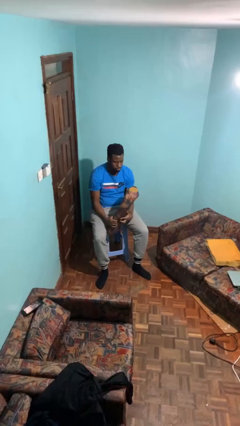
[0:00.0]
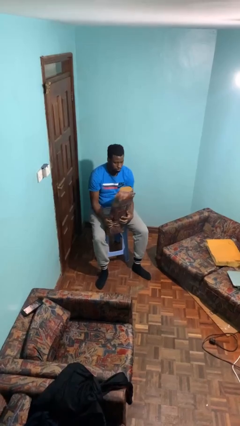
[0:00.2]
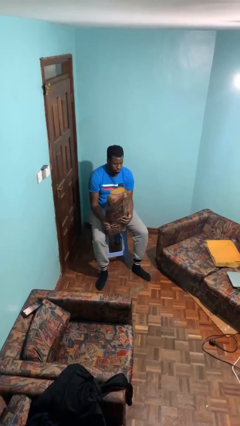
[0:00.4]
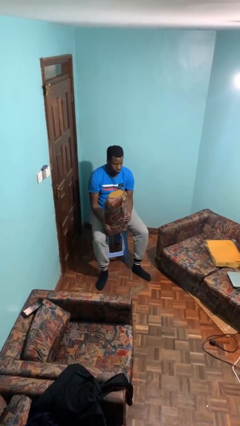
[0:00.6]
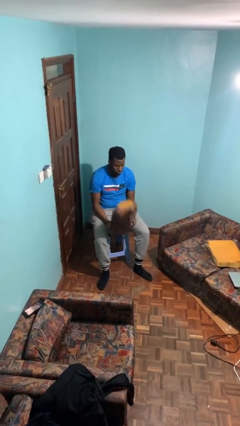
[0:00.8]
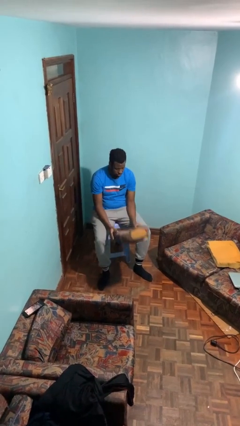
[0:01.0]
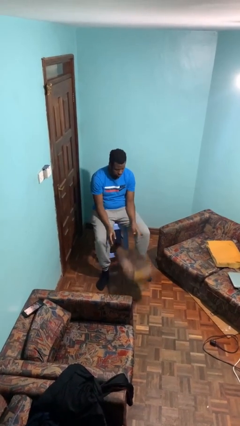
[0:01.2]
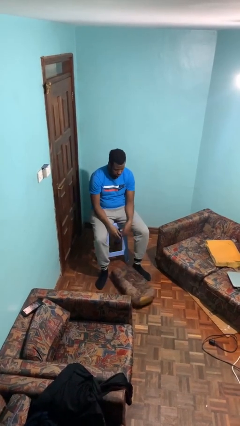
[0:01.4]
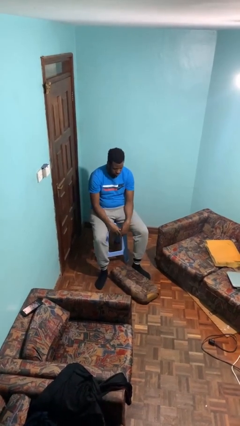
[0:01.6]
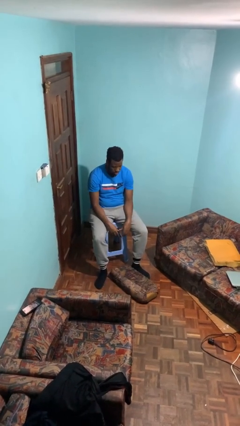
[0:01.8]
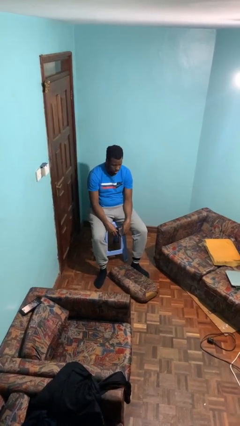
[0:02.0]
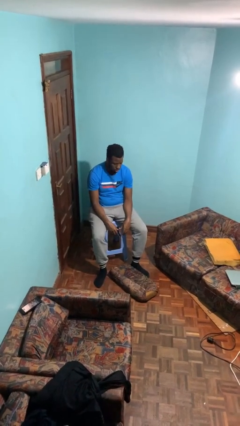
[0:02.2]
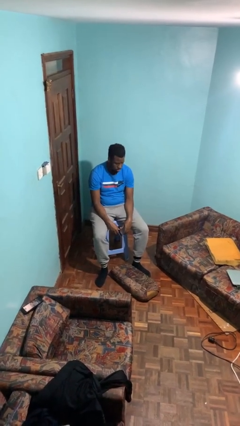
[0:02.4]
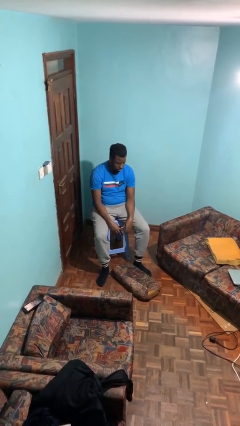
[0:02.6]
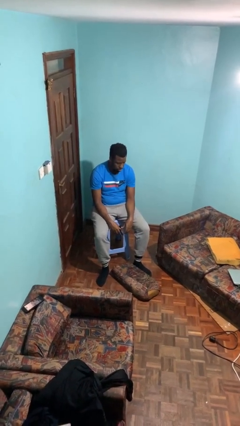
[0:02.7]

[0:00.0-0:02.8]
person drops object

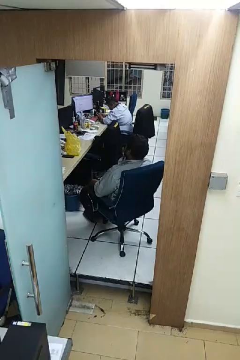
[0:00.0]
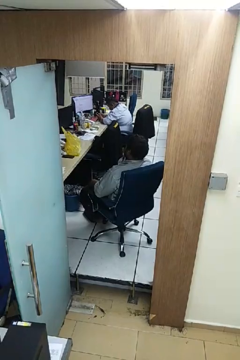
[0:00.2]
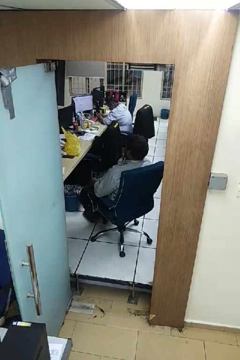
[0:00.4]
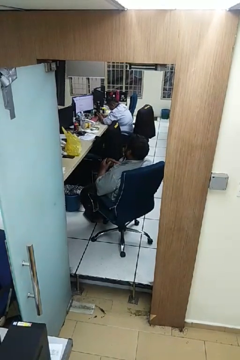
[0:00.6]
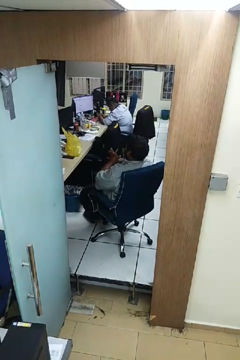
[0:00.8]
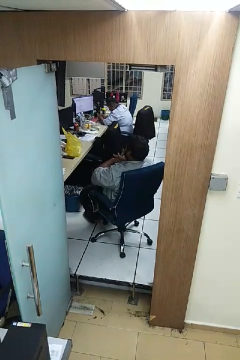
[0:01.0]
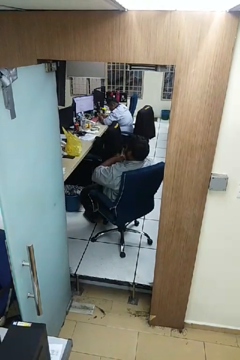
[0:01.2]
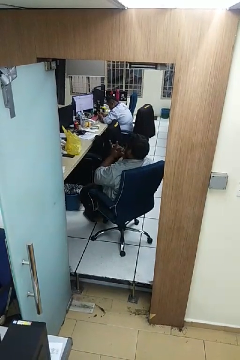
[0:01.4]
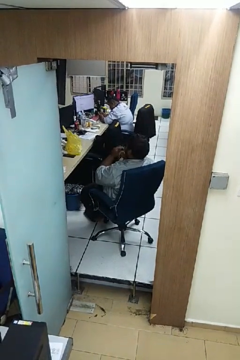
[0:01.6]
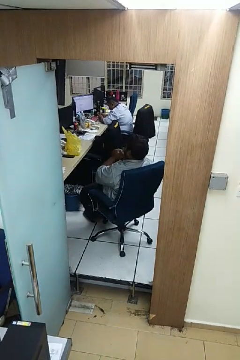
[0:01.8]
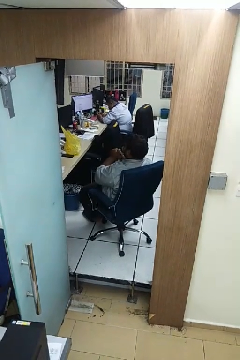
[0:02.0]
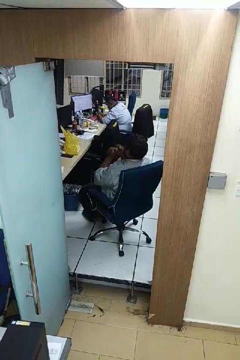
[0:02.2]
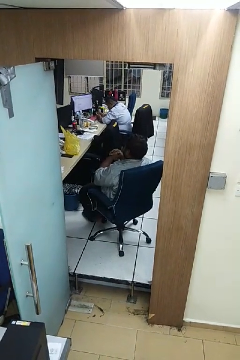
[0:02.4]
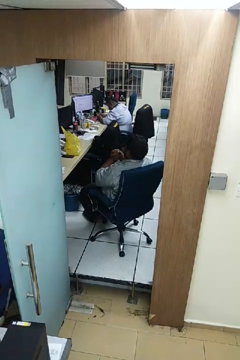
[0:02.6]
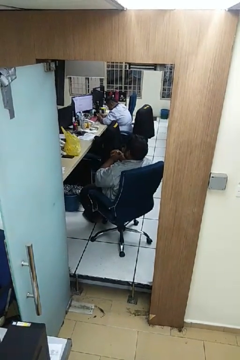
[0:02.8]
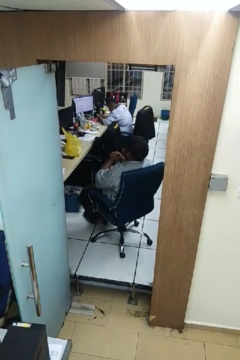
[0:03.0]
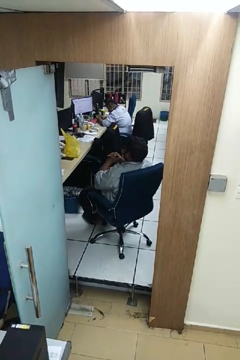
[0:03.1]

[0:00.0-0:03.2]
person cracks knuckles

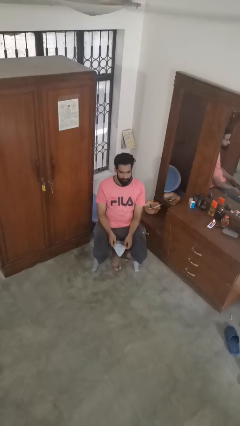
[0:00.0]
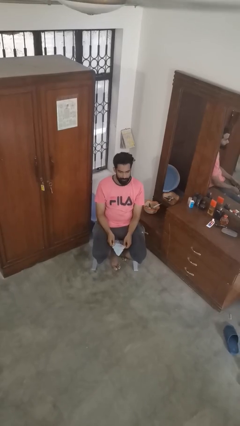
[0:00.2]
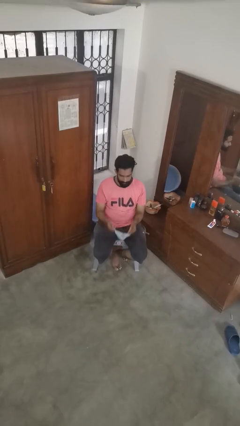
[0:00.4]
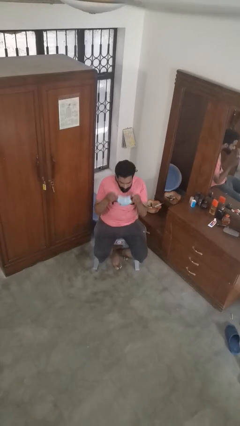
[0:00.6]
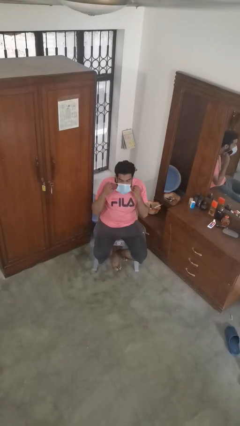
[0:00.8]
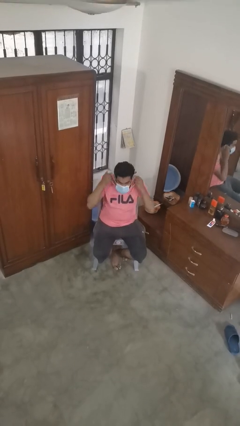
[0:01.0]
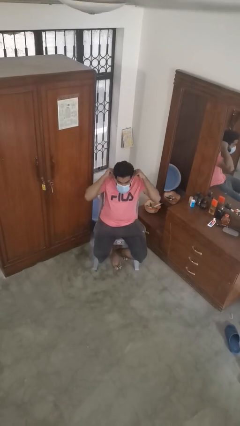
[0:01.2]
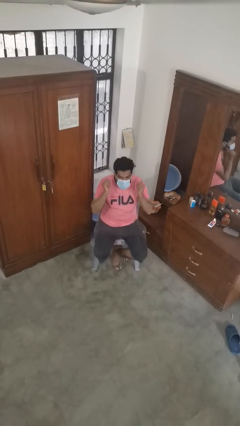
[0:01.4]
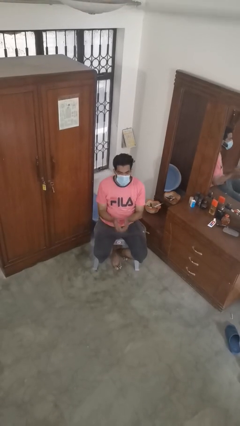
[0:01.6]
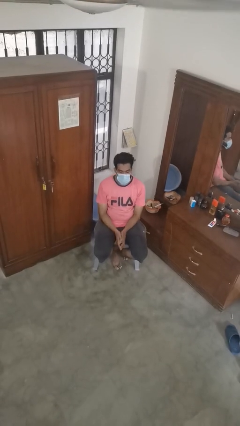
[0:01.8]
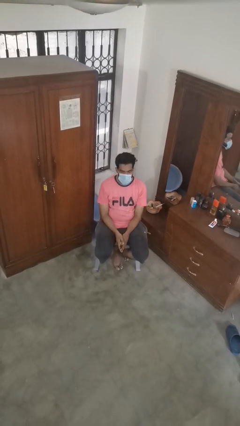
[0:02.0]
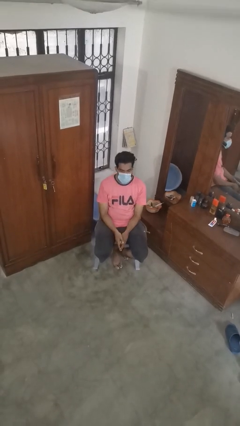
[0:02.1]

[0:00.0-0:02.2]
person puts on facemask

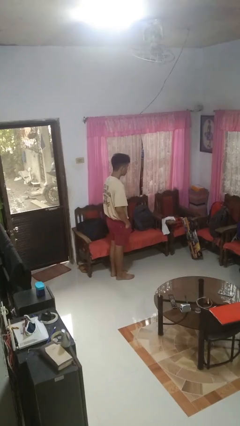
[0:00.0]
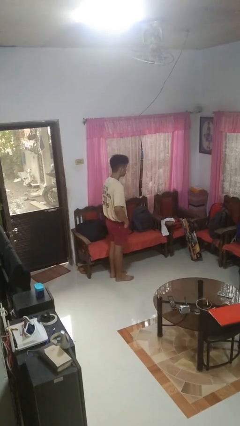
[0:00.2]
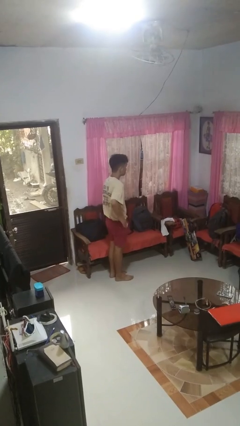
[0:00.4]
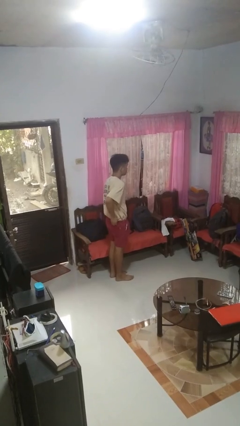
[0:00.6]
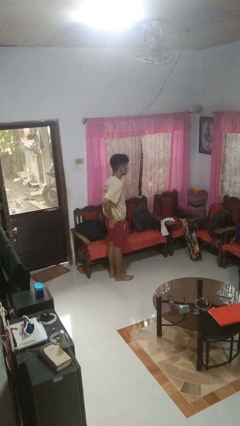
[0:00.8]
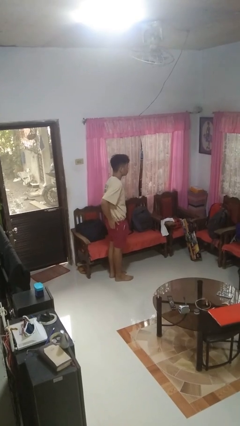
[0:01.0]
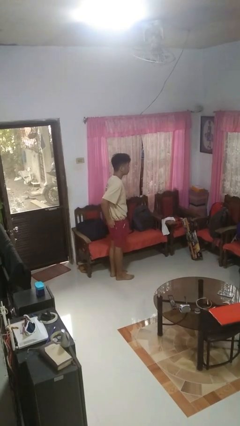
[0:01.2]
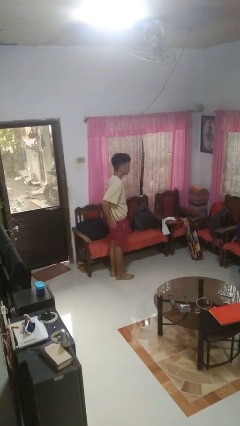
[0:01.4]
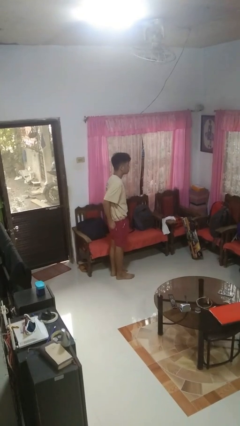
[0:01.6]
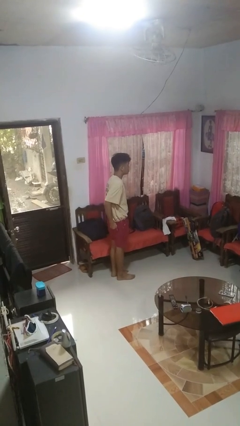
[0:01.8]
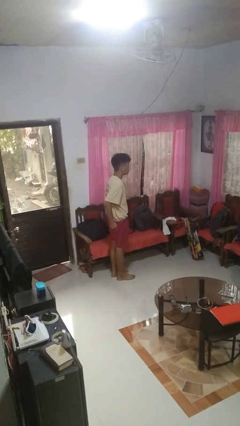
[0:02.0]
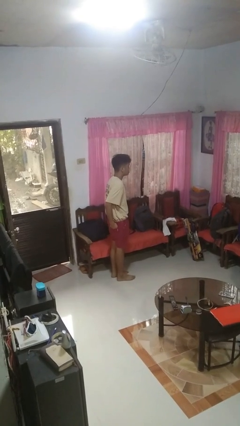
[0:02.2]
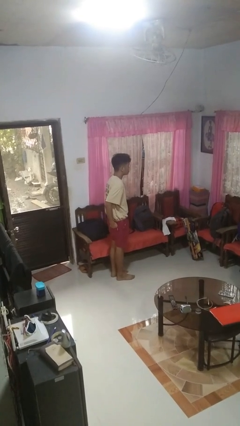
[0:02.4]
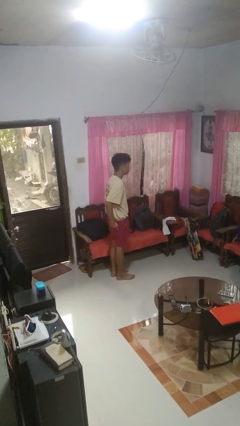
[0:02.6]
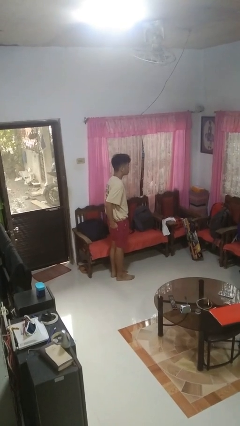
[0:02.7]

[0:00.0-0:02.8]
person puts hands in back pockets

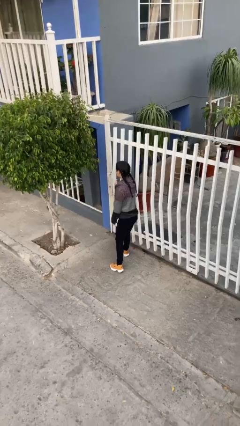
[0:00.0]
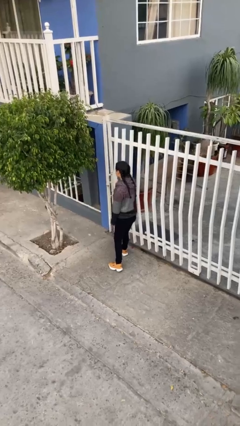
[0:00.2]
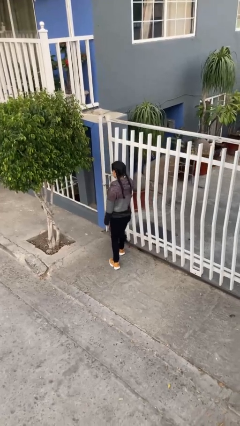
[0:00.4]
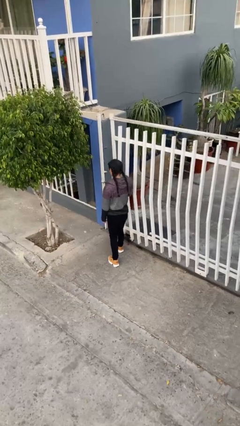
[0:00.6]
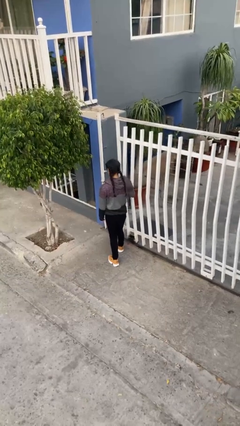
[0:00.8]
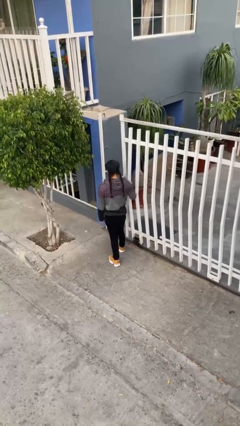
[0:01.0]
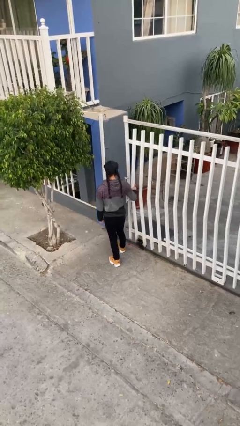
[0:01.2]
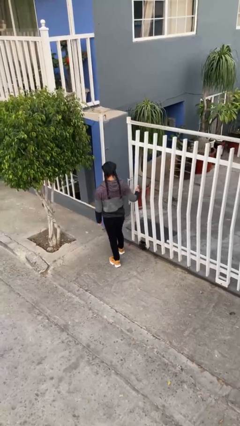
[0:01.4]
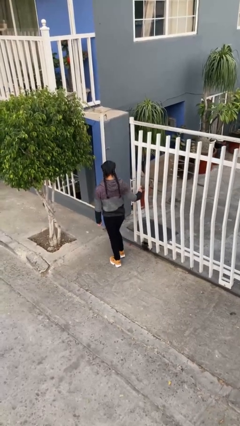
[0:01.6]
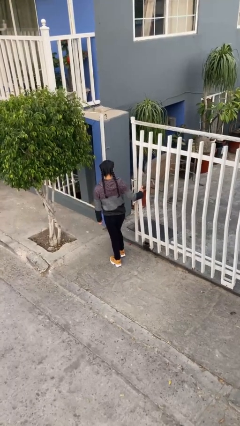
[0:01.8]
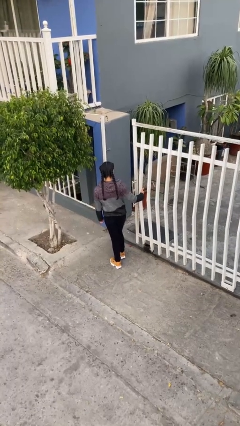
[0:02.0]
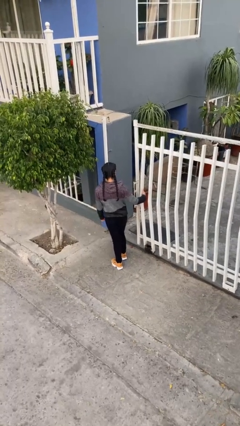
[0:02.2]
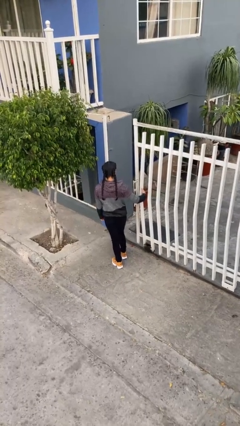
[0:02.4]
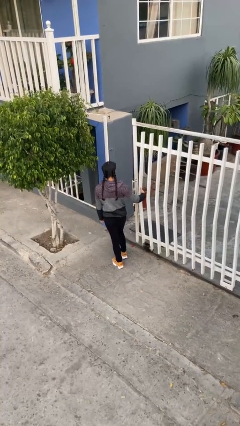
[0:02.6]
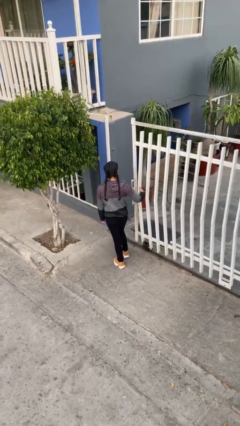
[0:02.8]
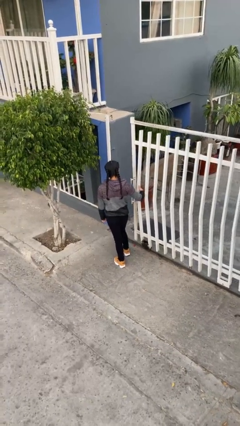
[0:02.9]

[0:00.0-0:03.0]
person opens facility door

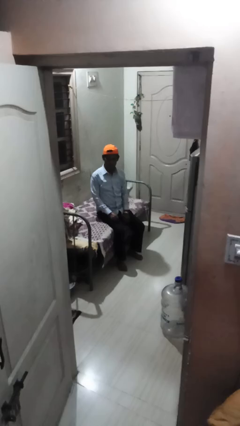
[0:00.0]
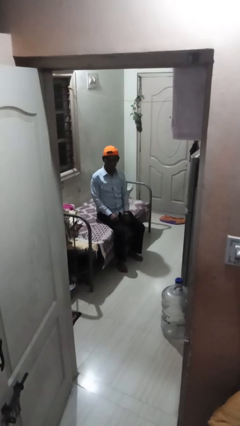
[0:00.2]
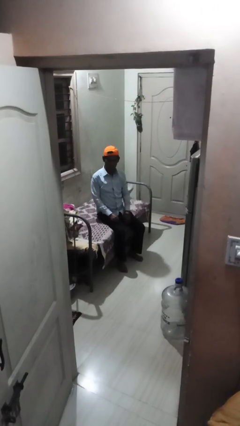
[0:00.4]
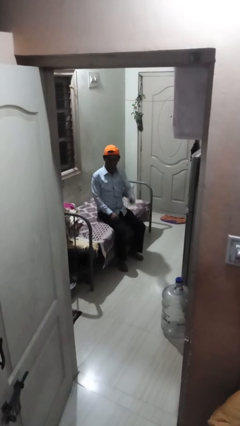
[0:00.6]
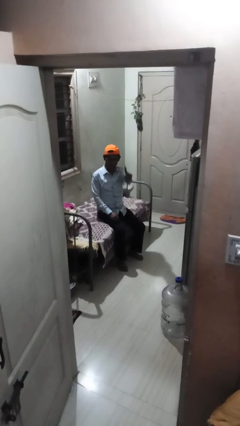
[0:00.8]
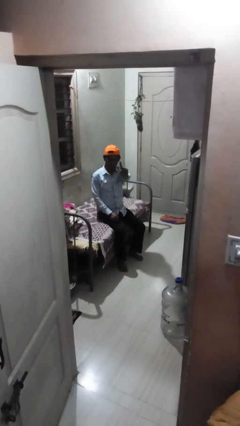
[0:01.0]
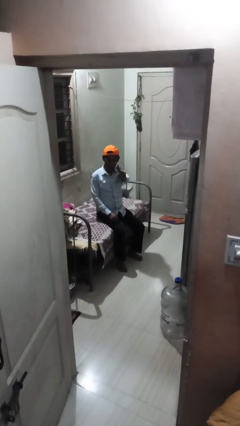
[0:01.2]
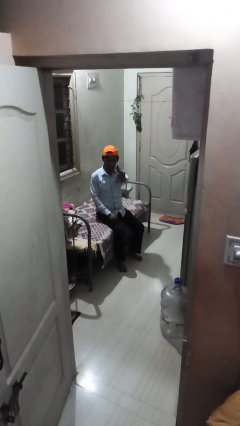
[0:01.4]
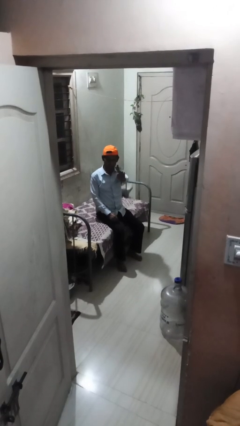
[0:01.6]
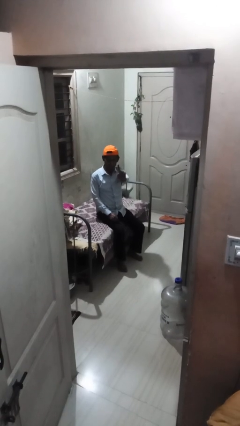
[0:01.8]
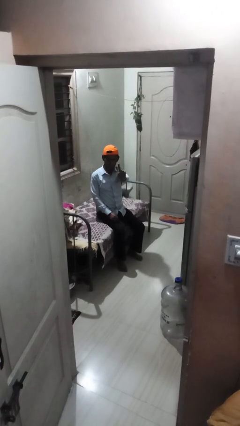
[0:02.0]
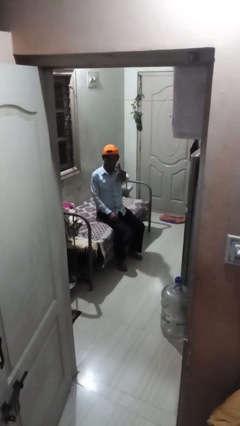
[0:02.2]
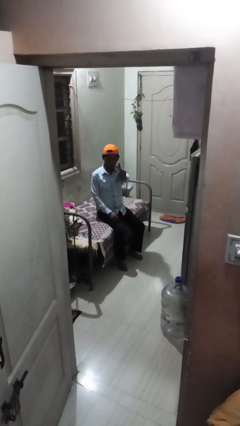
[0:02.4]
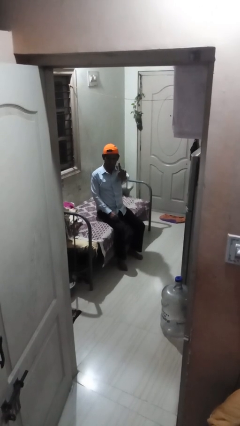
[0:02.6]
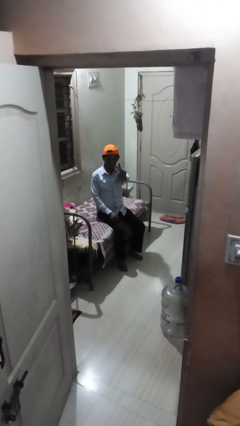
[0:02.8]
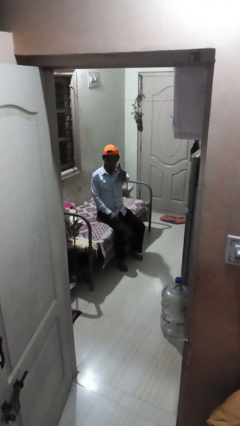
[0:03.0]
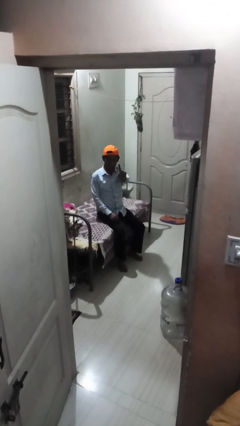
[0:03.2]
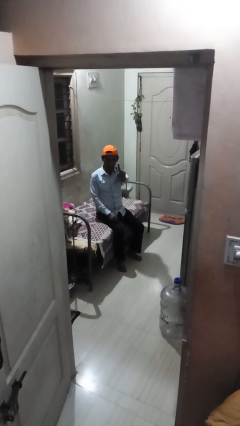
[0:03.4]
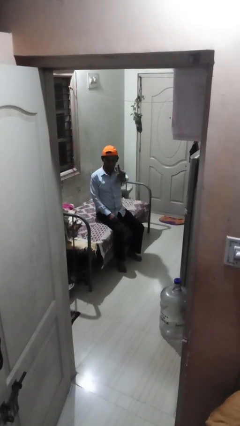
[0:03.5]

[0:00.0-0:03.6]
person gestures number one

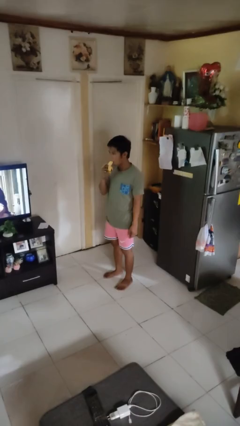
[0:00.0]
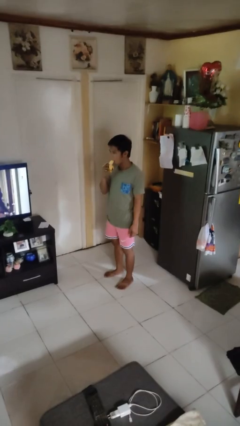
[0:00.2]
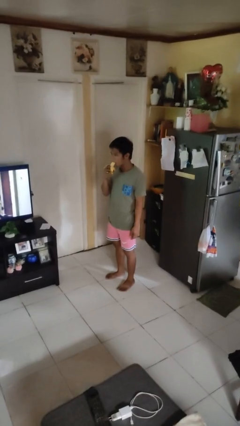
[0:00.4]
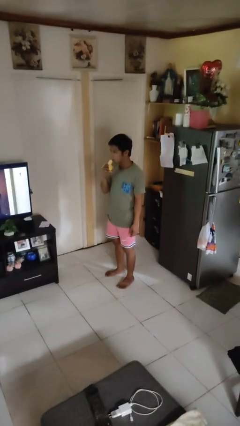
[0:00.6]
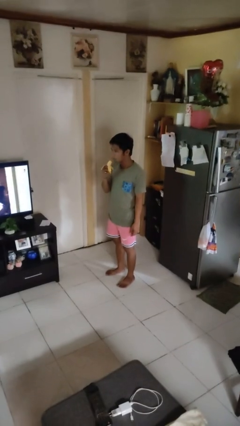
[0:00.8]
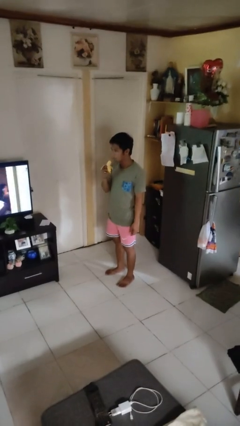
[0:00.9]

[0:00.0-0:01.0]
person eats banana
